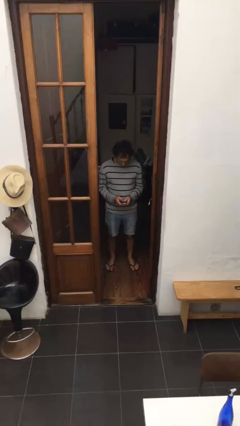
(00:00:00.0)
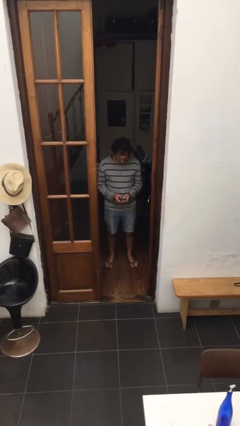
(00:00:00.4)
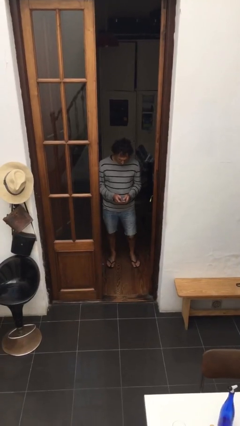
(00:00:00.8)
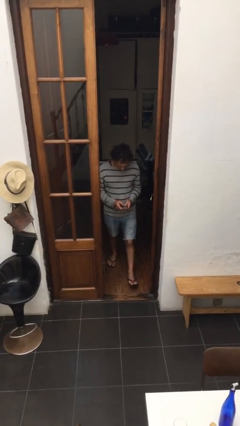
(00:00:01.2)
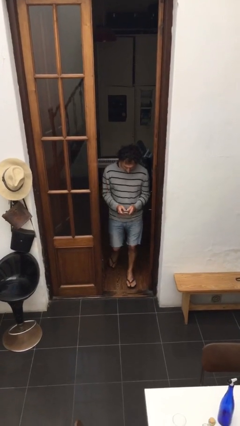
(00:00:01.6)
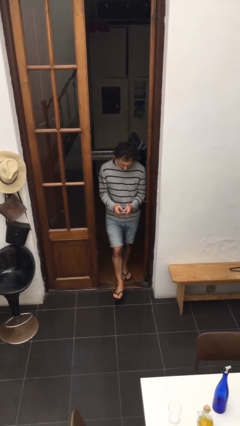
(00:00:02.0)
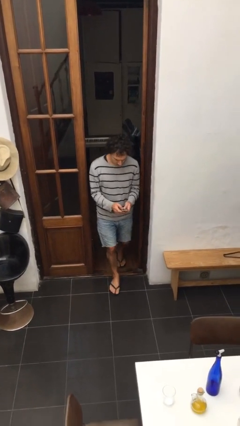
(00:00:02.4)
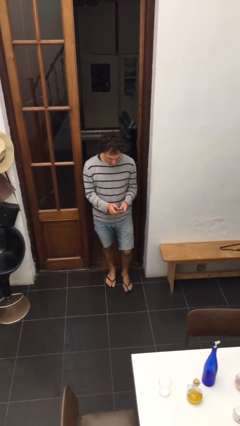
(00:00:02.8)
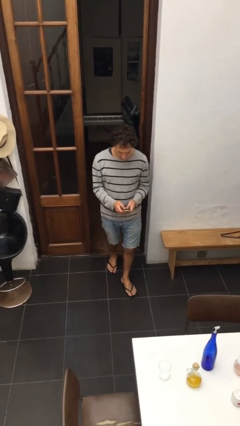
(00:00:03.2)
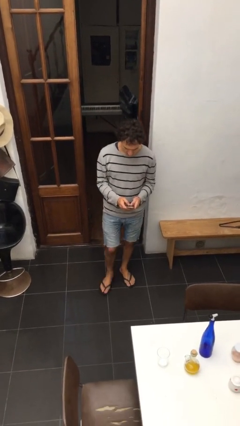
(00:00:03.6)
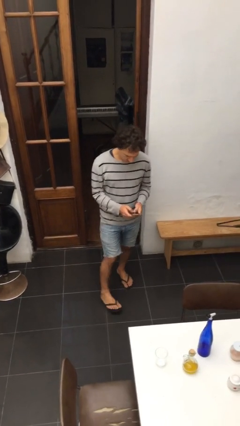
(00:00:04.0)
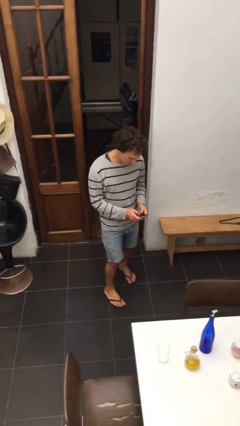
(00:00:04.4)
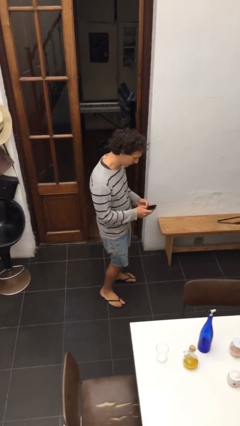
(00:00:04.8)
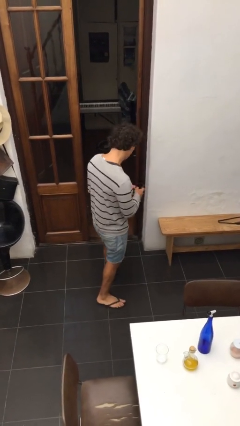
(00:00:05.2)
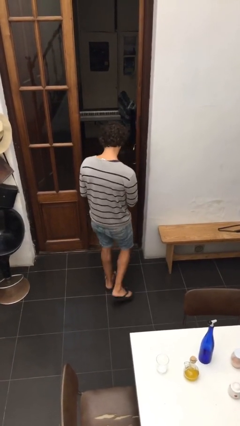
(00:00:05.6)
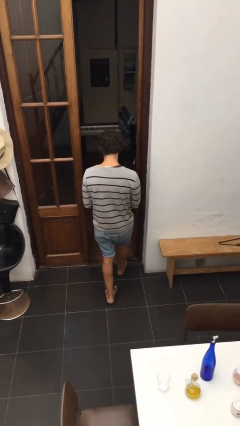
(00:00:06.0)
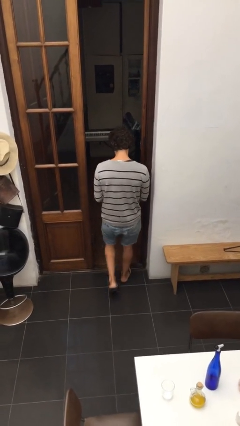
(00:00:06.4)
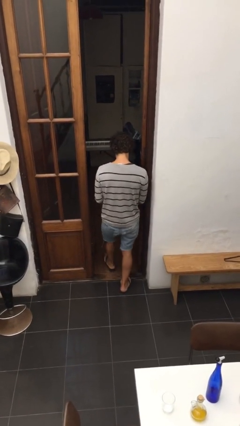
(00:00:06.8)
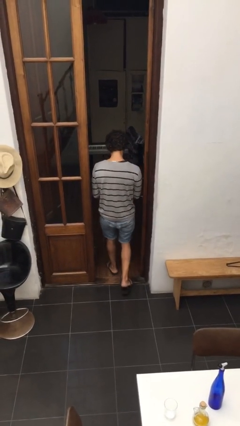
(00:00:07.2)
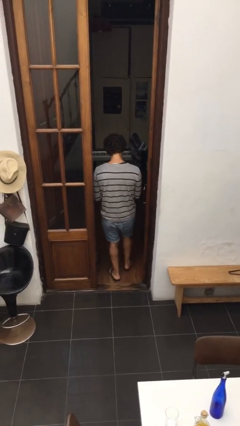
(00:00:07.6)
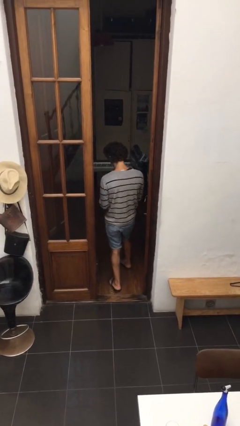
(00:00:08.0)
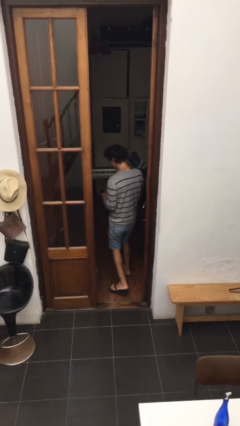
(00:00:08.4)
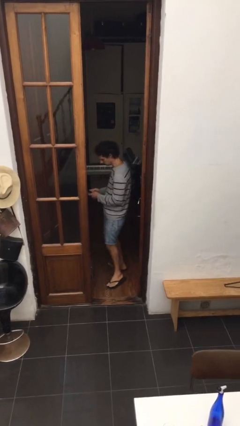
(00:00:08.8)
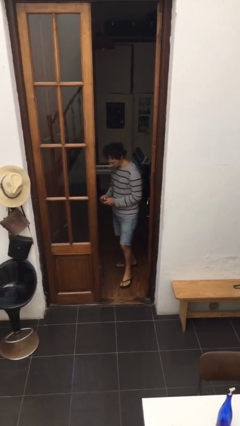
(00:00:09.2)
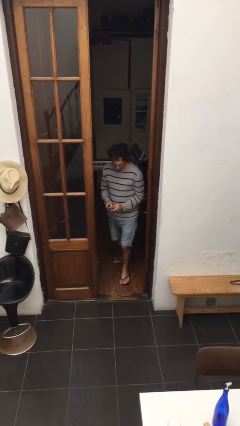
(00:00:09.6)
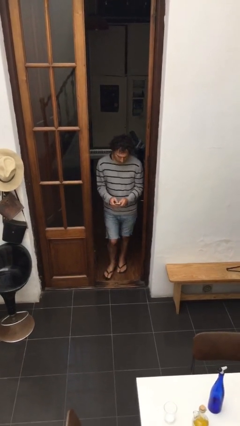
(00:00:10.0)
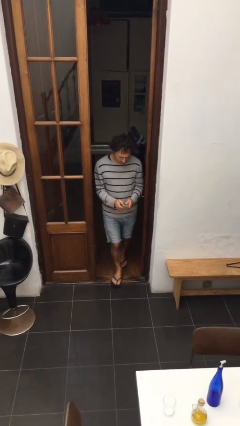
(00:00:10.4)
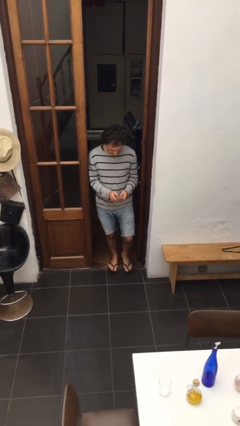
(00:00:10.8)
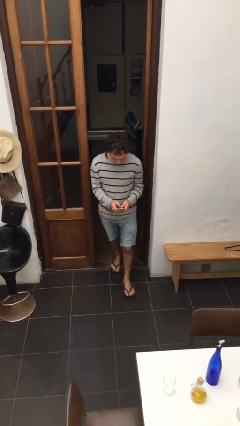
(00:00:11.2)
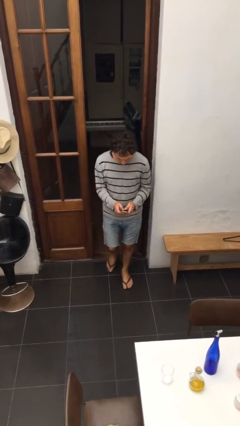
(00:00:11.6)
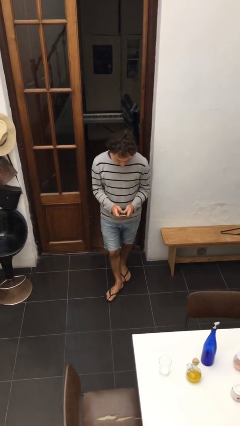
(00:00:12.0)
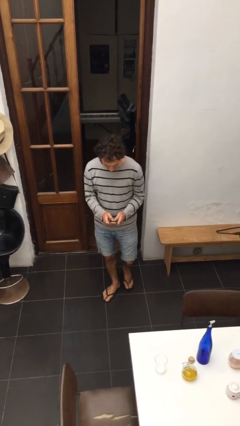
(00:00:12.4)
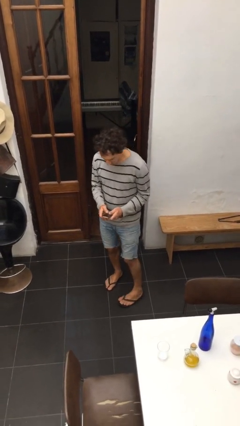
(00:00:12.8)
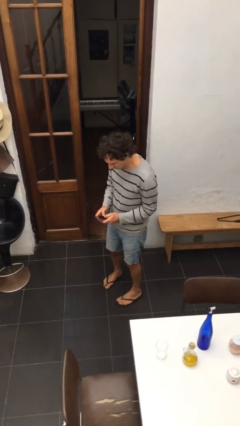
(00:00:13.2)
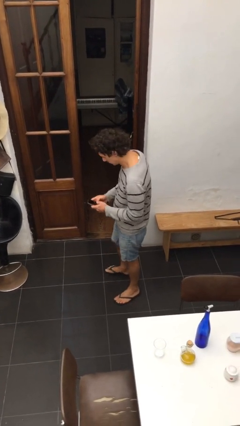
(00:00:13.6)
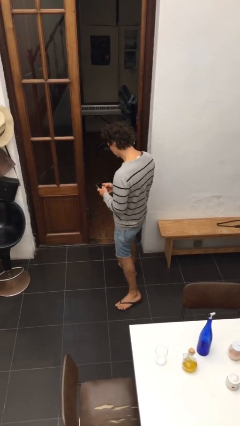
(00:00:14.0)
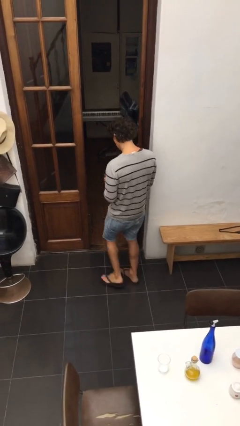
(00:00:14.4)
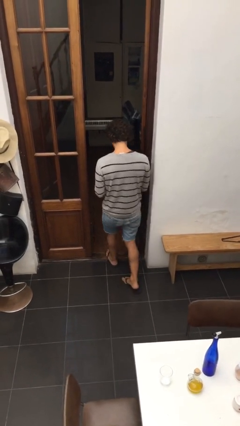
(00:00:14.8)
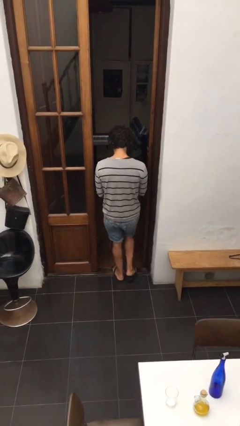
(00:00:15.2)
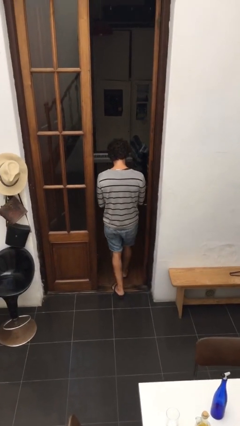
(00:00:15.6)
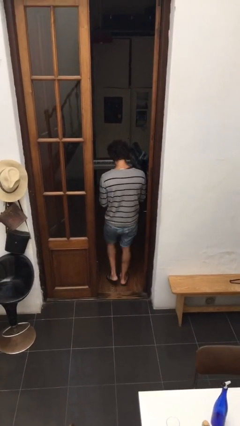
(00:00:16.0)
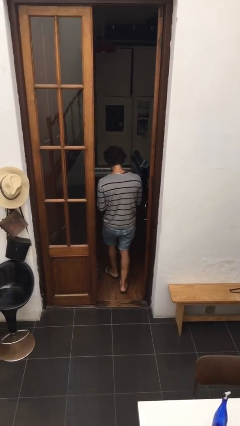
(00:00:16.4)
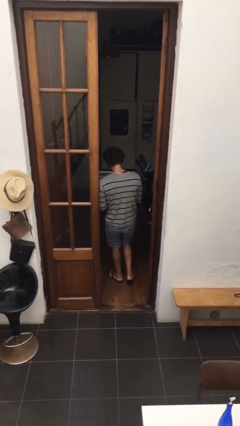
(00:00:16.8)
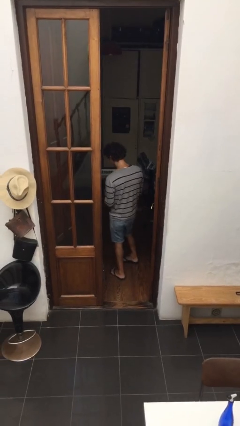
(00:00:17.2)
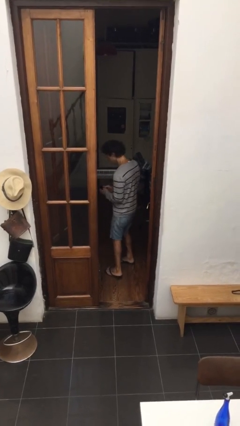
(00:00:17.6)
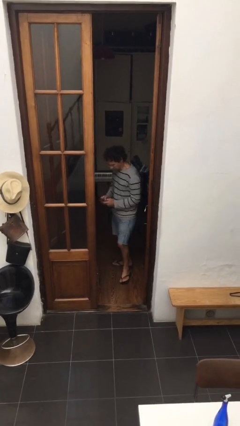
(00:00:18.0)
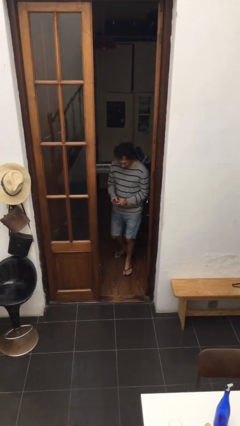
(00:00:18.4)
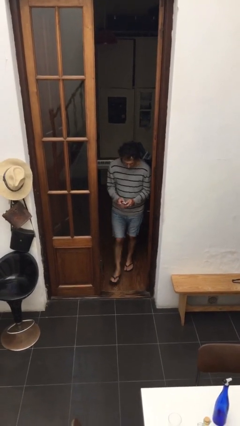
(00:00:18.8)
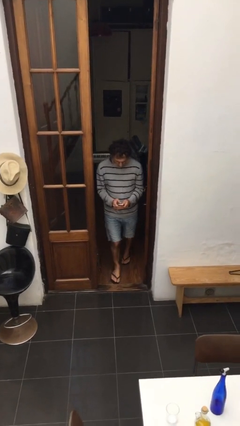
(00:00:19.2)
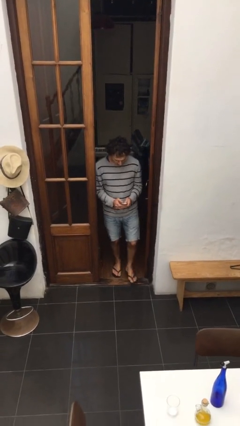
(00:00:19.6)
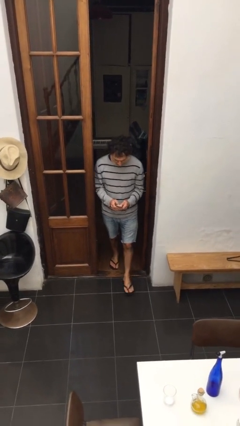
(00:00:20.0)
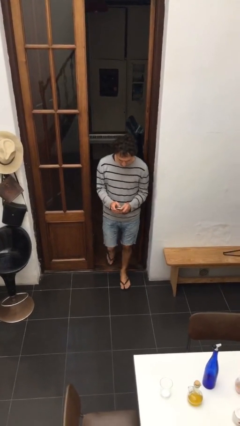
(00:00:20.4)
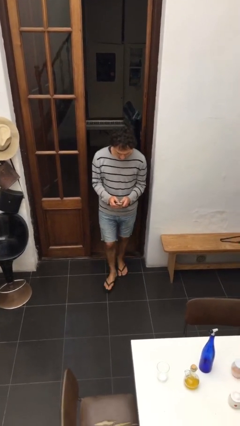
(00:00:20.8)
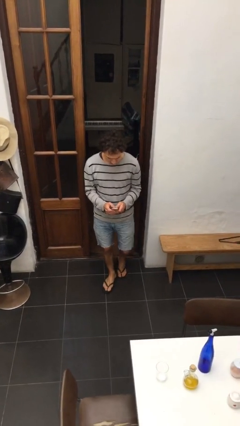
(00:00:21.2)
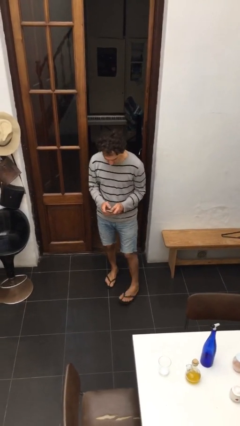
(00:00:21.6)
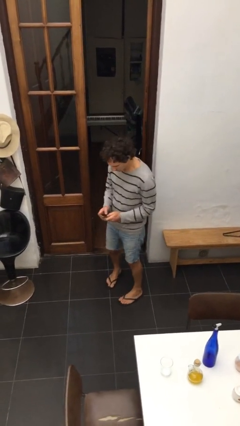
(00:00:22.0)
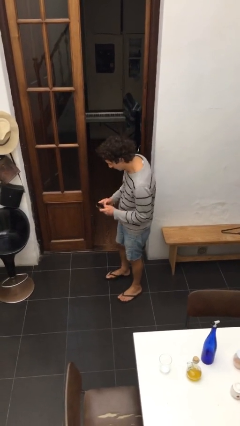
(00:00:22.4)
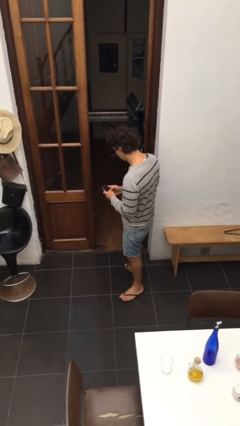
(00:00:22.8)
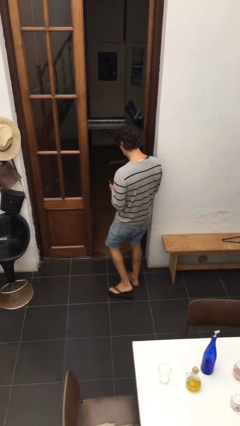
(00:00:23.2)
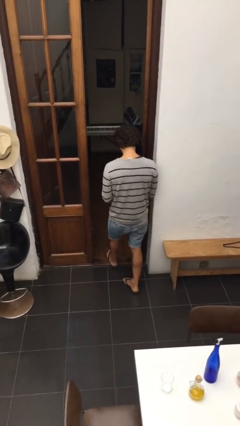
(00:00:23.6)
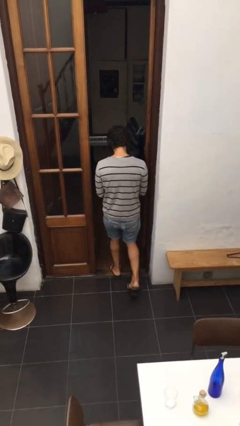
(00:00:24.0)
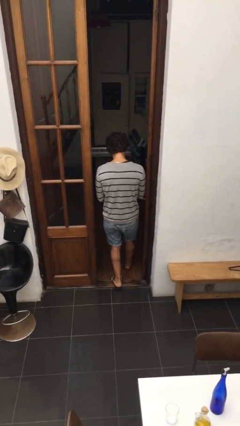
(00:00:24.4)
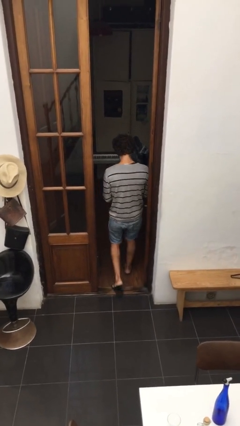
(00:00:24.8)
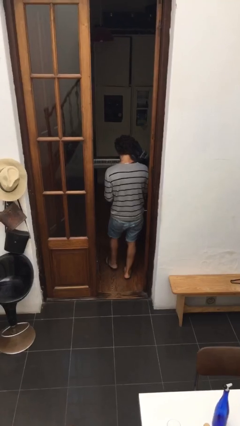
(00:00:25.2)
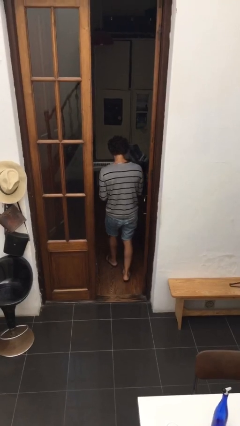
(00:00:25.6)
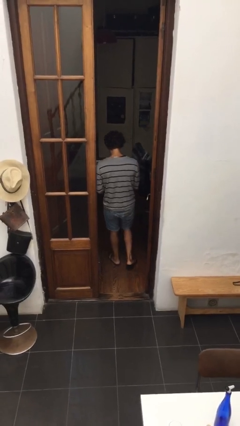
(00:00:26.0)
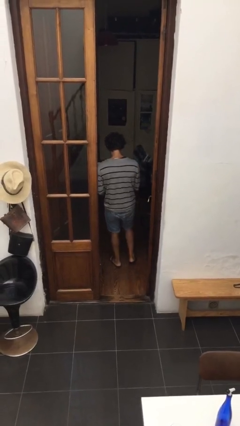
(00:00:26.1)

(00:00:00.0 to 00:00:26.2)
person texts on phone

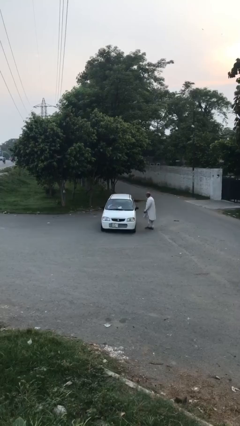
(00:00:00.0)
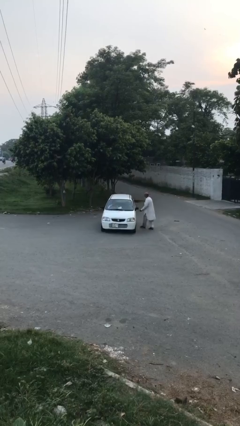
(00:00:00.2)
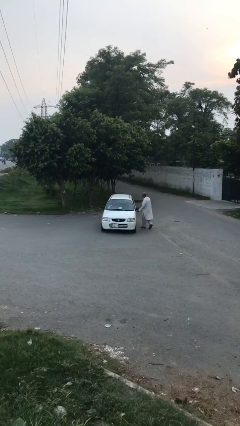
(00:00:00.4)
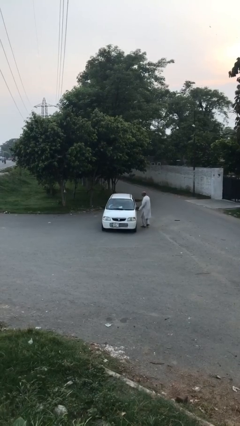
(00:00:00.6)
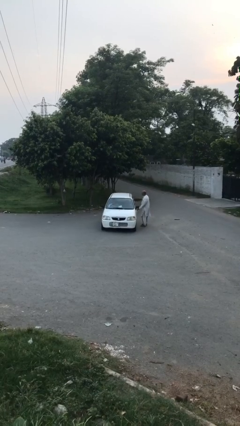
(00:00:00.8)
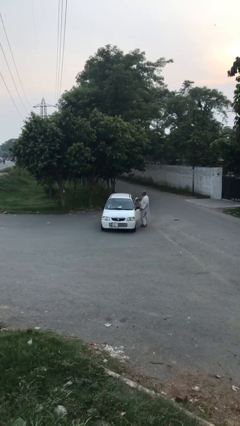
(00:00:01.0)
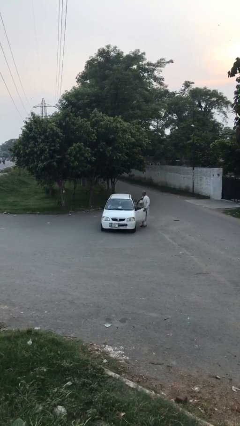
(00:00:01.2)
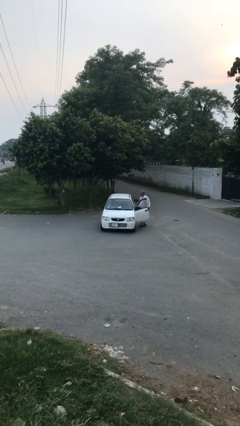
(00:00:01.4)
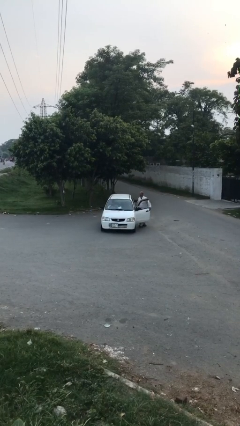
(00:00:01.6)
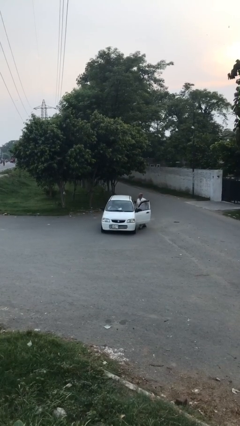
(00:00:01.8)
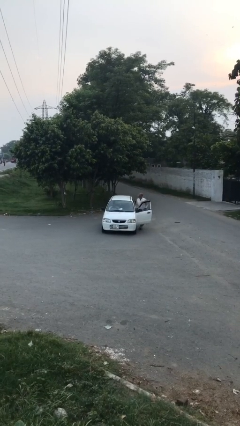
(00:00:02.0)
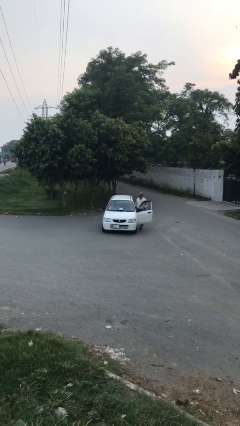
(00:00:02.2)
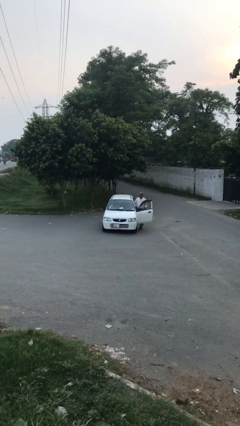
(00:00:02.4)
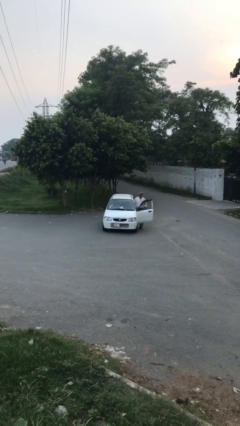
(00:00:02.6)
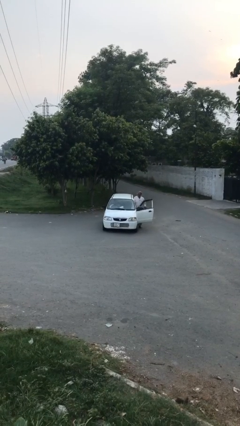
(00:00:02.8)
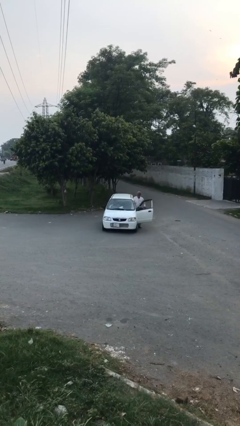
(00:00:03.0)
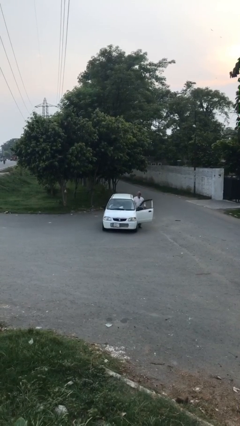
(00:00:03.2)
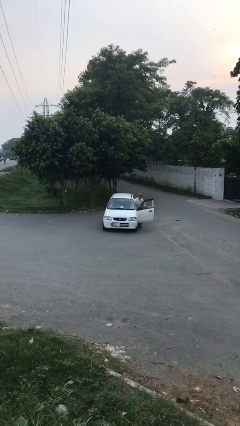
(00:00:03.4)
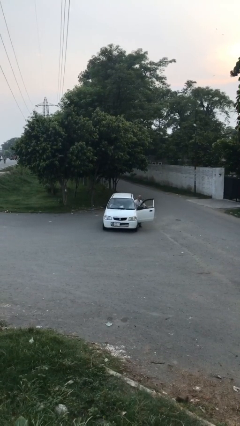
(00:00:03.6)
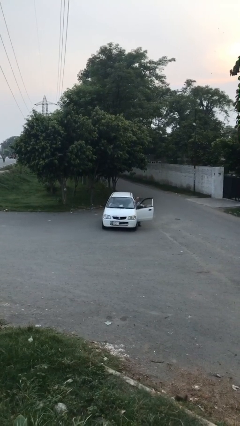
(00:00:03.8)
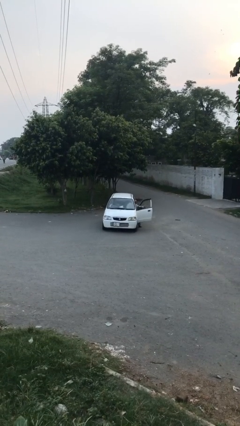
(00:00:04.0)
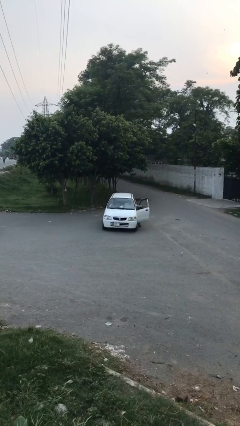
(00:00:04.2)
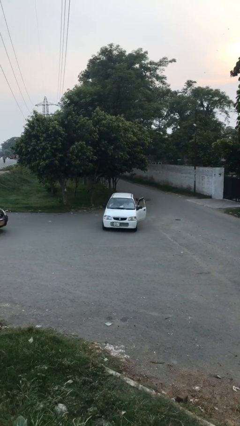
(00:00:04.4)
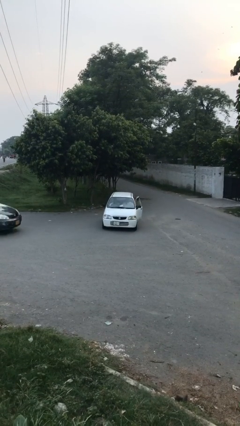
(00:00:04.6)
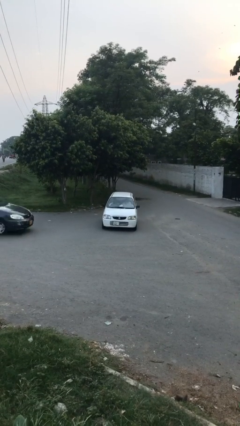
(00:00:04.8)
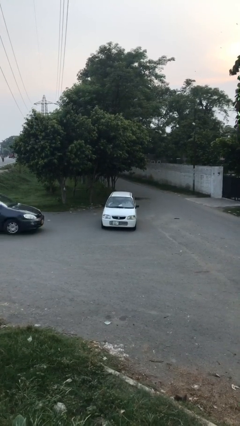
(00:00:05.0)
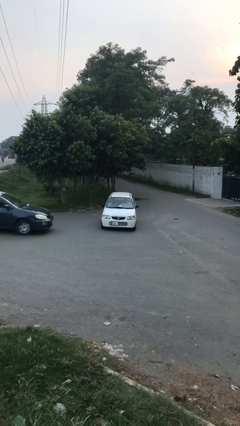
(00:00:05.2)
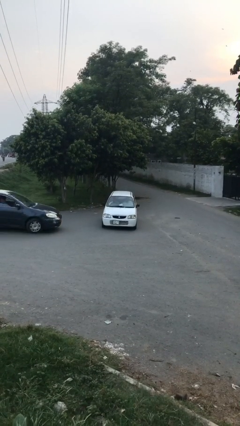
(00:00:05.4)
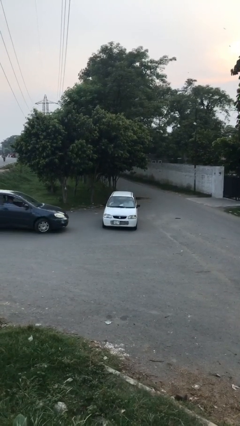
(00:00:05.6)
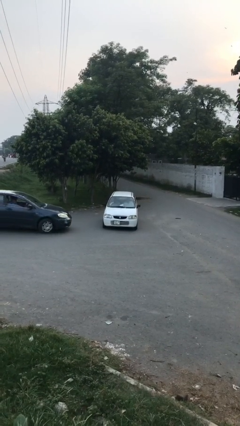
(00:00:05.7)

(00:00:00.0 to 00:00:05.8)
car picks up person
